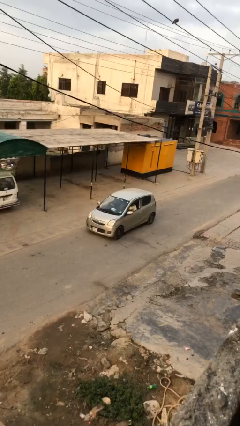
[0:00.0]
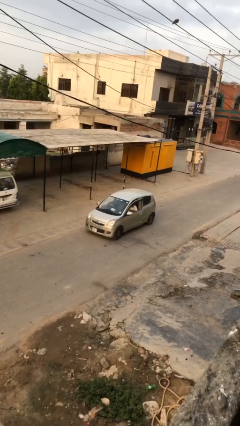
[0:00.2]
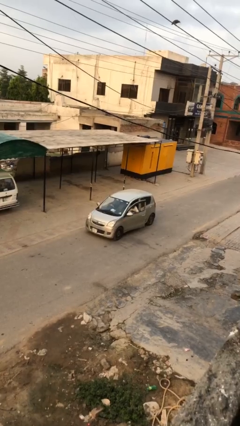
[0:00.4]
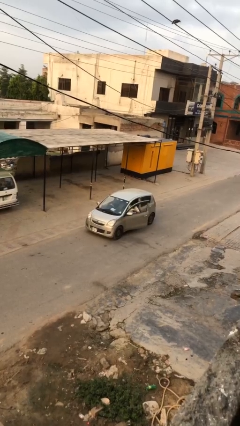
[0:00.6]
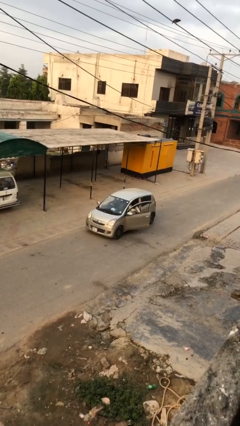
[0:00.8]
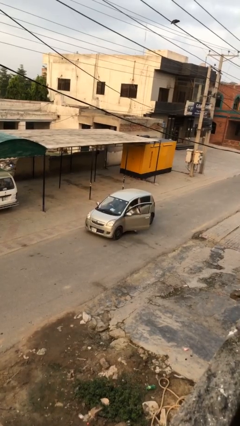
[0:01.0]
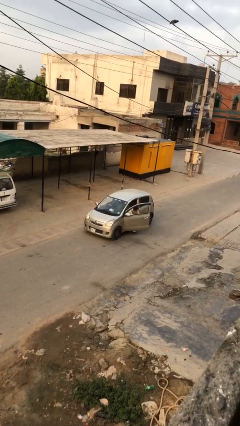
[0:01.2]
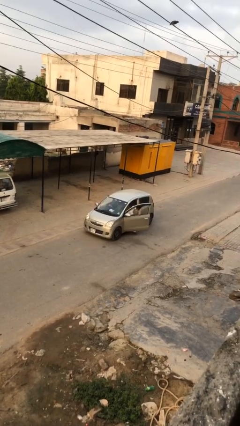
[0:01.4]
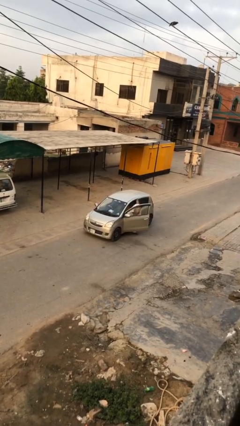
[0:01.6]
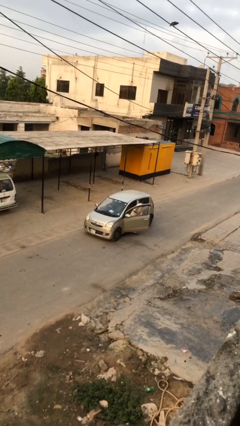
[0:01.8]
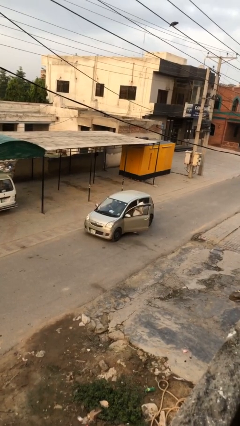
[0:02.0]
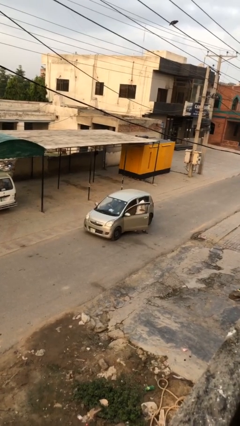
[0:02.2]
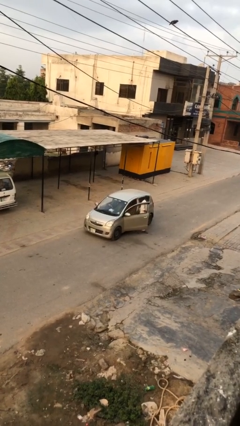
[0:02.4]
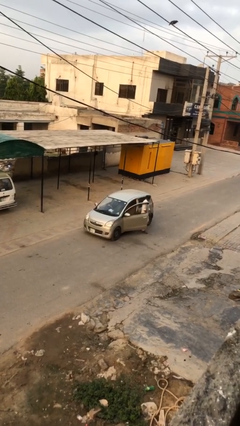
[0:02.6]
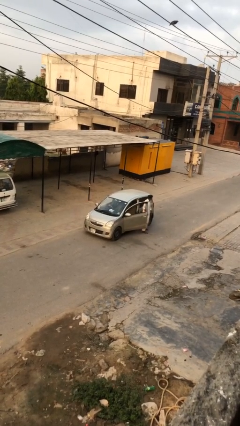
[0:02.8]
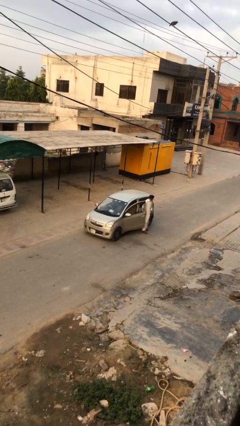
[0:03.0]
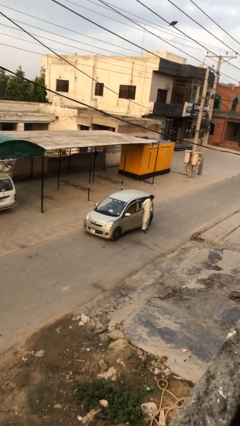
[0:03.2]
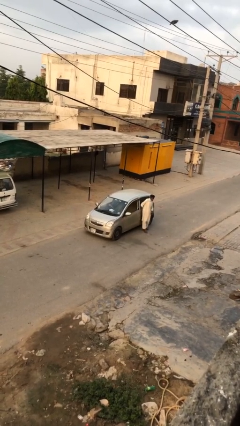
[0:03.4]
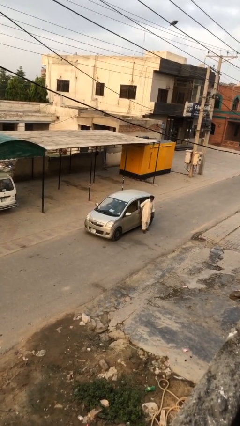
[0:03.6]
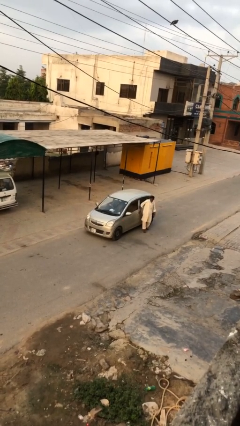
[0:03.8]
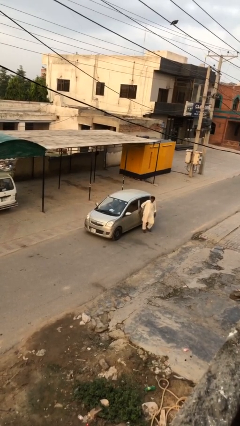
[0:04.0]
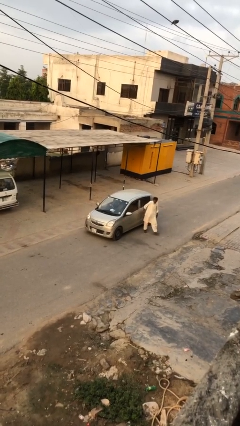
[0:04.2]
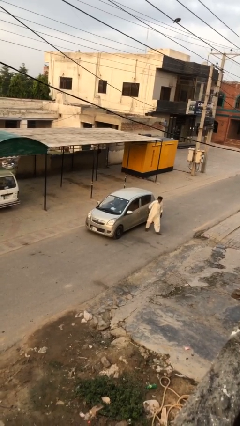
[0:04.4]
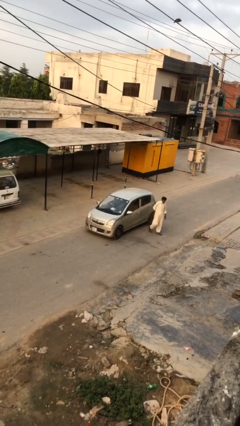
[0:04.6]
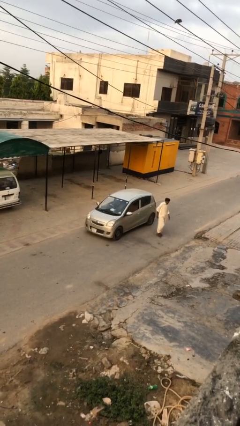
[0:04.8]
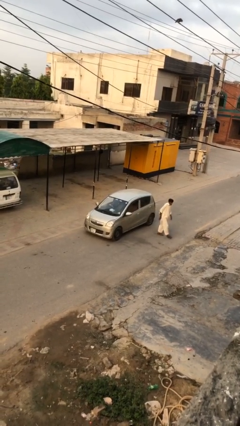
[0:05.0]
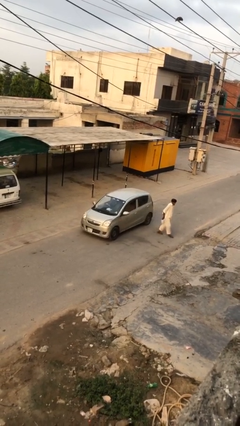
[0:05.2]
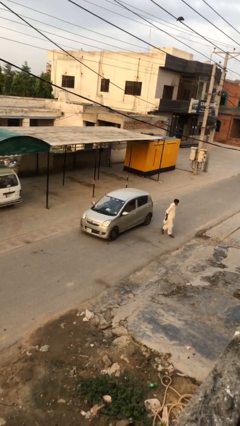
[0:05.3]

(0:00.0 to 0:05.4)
car drops off person

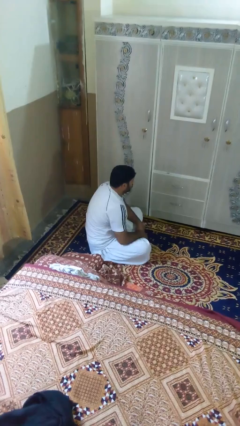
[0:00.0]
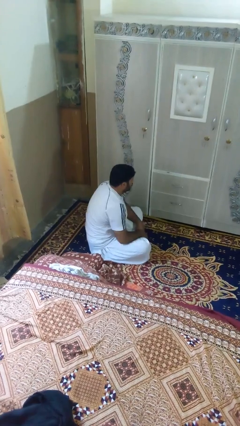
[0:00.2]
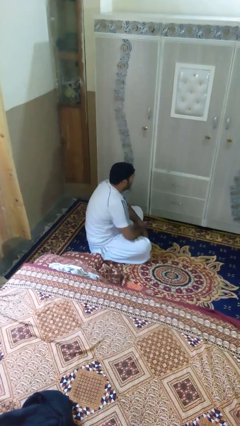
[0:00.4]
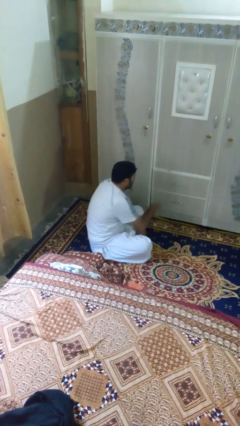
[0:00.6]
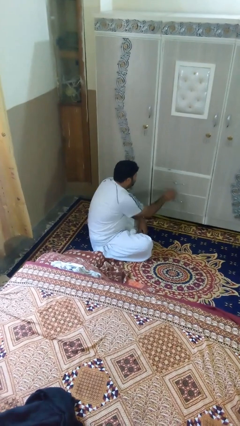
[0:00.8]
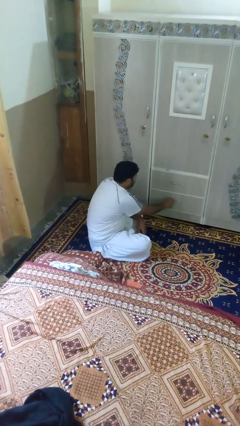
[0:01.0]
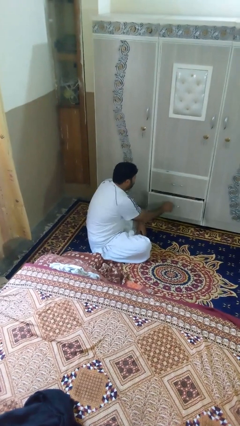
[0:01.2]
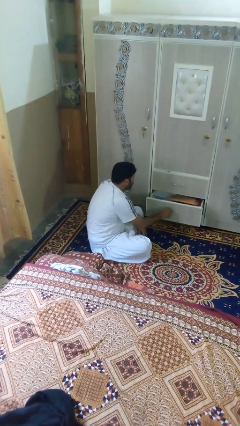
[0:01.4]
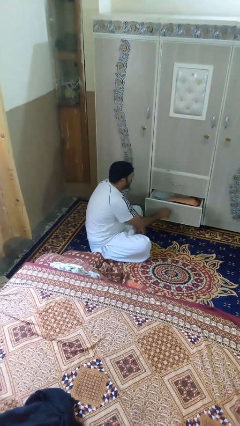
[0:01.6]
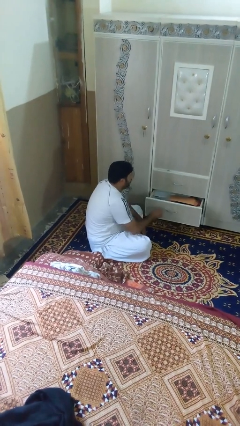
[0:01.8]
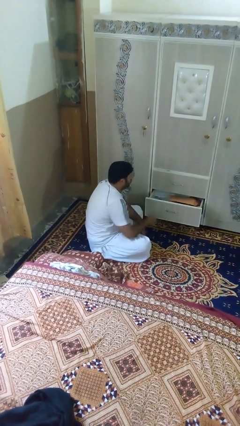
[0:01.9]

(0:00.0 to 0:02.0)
person opens dresser drawer

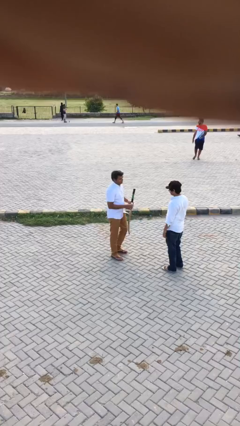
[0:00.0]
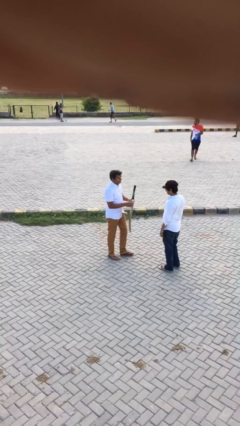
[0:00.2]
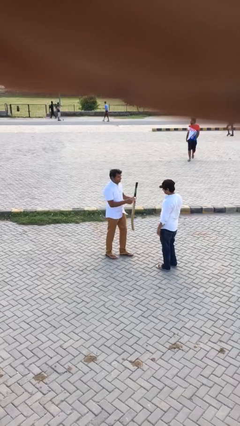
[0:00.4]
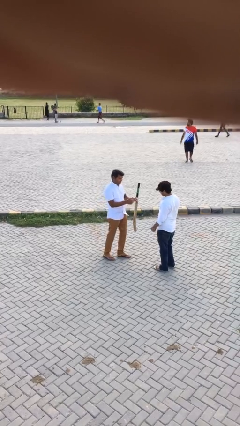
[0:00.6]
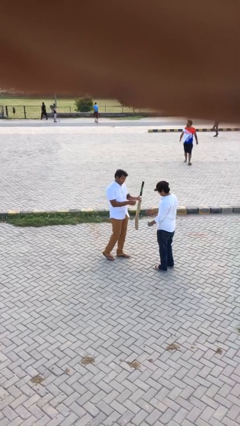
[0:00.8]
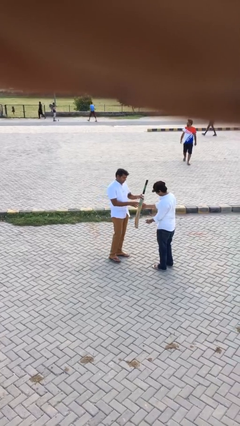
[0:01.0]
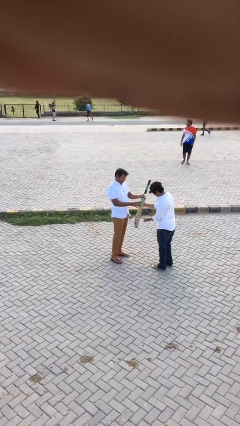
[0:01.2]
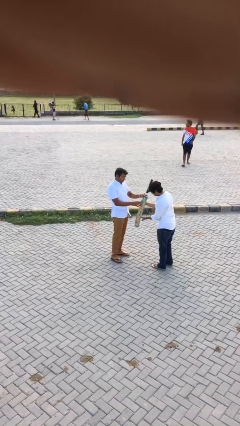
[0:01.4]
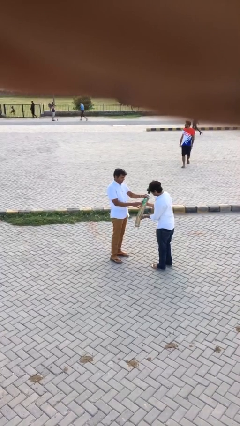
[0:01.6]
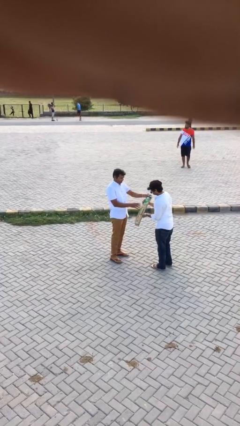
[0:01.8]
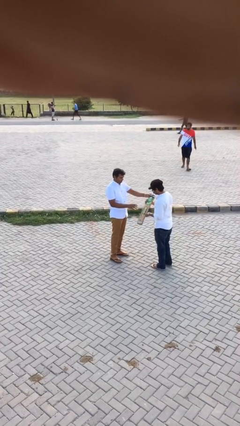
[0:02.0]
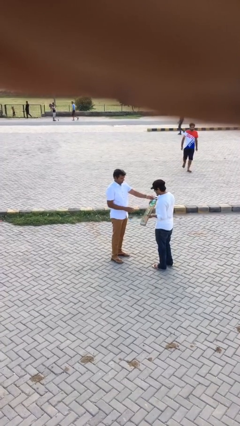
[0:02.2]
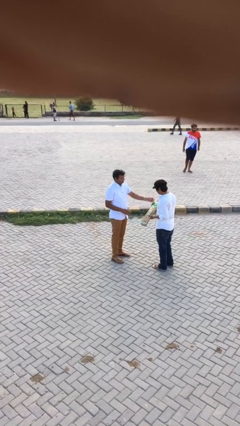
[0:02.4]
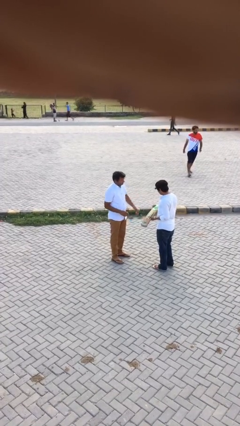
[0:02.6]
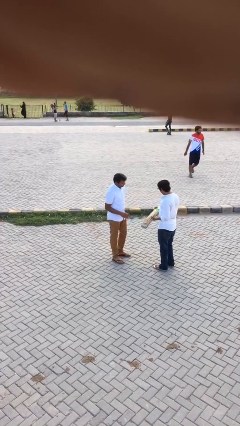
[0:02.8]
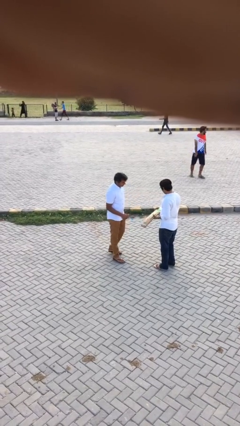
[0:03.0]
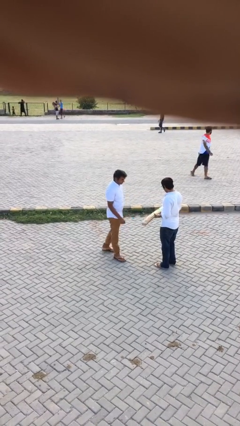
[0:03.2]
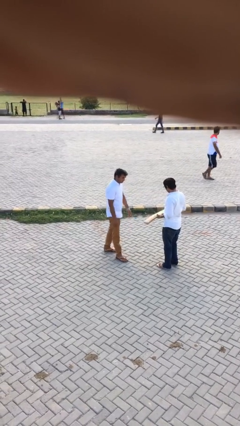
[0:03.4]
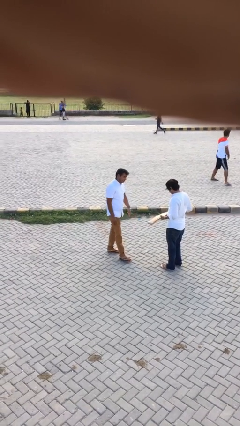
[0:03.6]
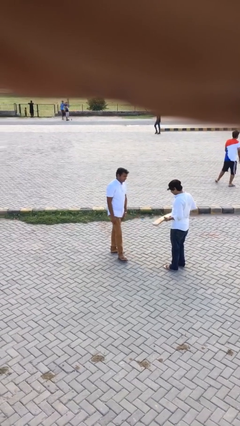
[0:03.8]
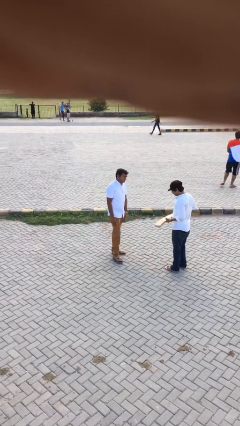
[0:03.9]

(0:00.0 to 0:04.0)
person transfers object to person

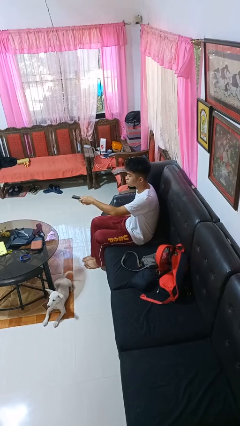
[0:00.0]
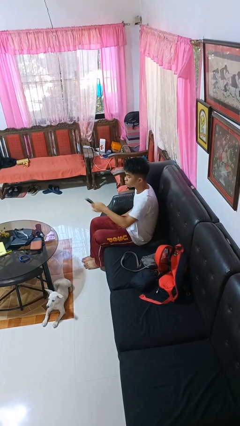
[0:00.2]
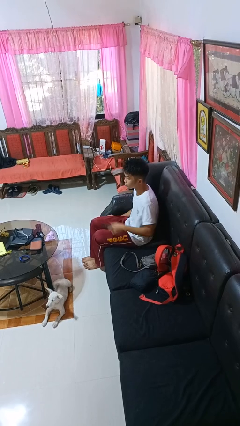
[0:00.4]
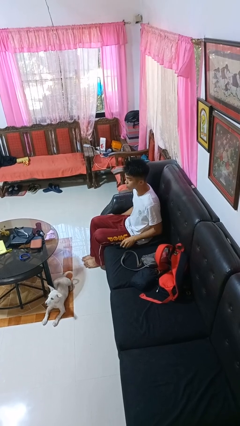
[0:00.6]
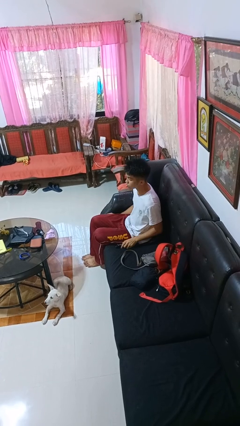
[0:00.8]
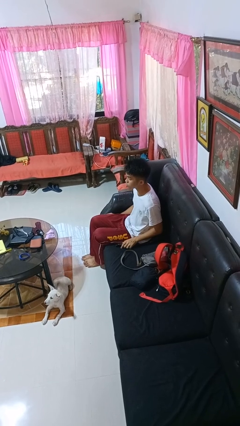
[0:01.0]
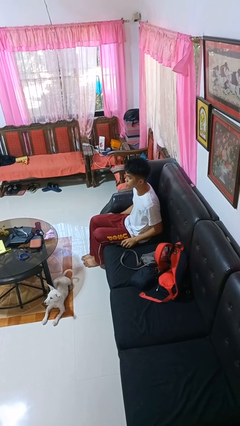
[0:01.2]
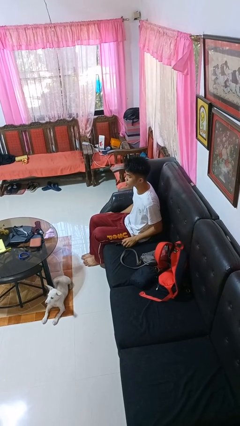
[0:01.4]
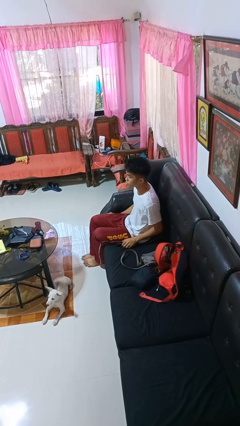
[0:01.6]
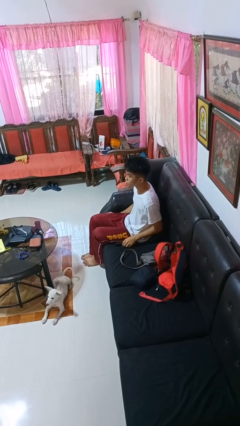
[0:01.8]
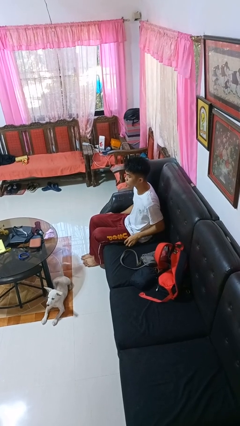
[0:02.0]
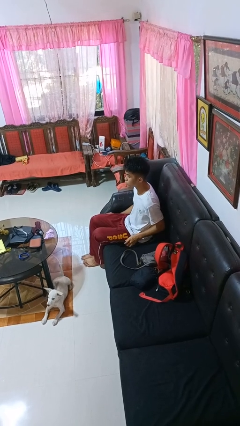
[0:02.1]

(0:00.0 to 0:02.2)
person picks up object from shelf

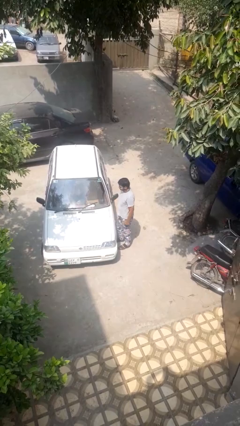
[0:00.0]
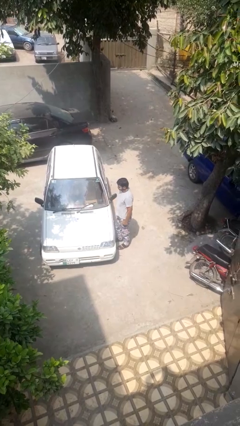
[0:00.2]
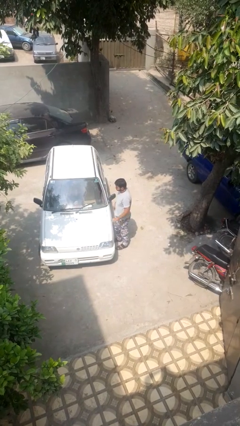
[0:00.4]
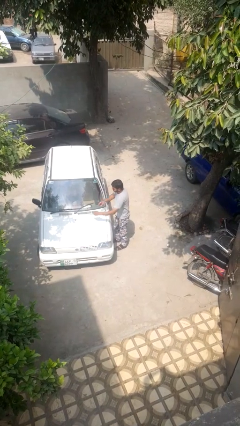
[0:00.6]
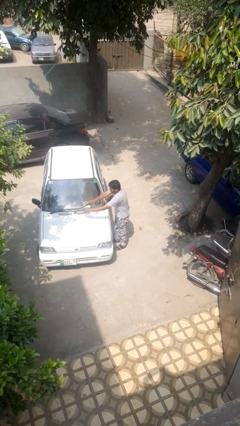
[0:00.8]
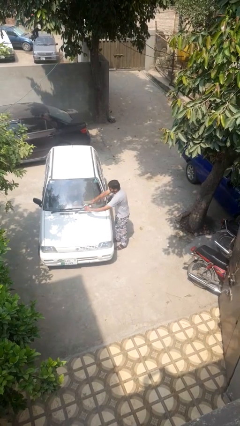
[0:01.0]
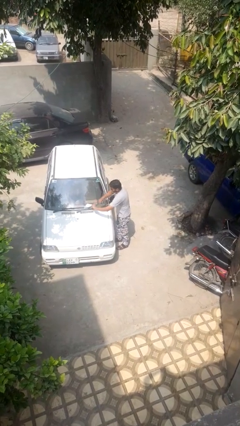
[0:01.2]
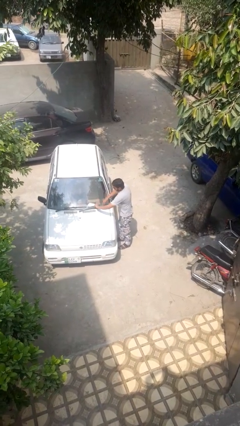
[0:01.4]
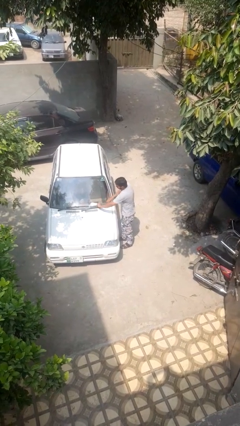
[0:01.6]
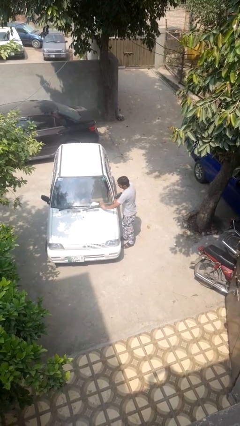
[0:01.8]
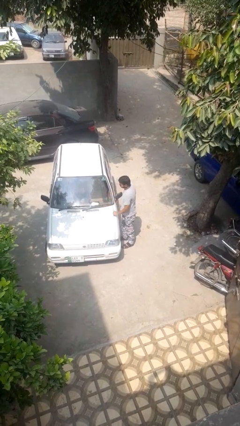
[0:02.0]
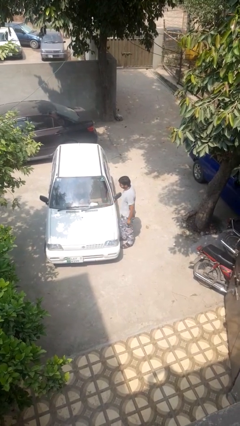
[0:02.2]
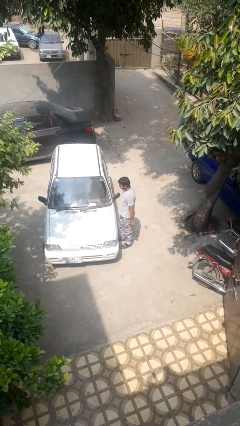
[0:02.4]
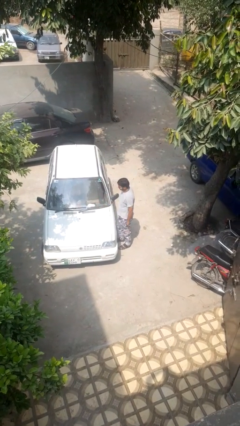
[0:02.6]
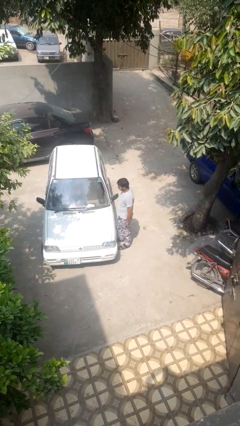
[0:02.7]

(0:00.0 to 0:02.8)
person flips down car wipers

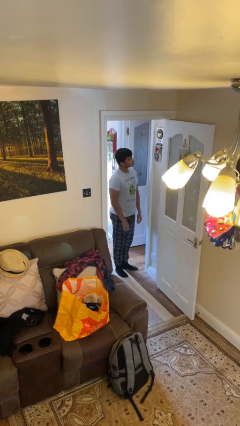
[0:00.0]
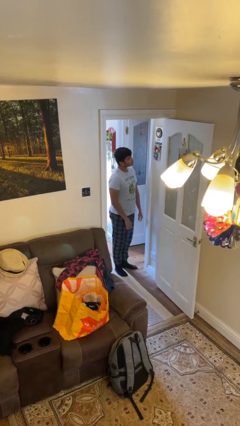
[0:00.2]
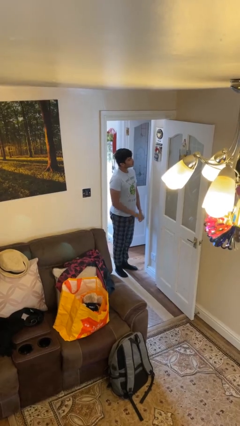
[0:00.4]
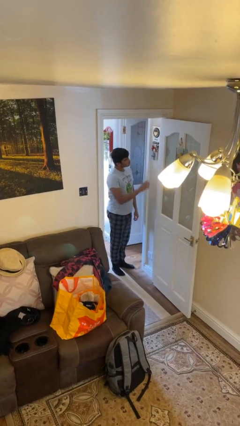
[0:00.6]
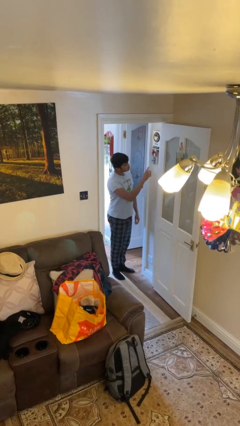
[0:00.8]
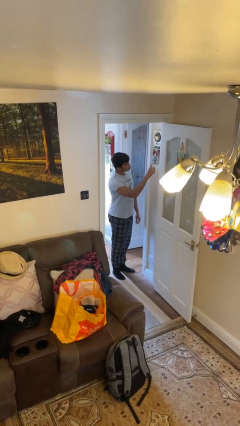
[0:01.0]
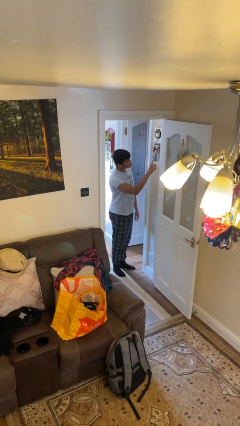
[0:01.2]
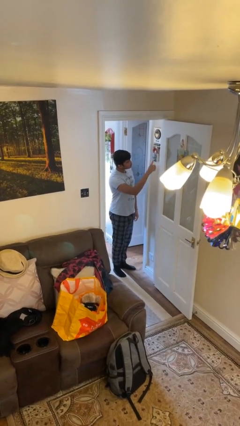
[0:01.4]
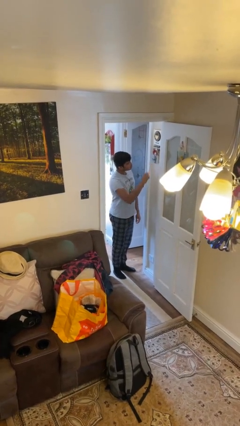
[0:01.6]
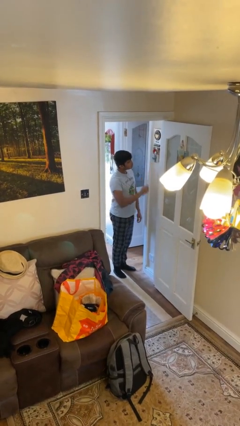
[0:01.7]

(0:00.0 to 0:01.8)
person adjusts thermostat
